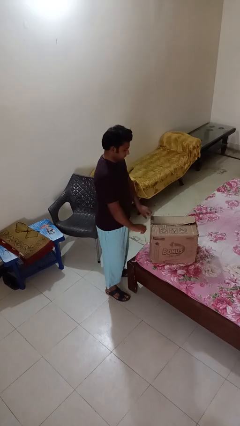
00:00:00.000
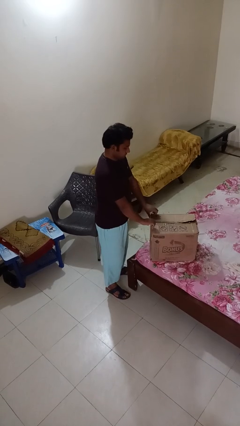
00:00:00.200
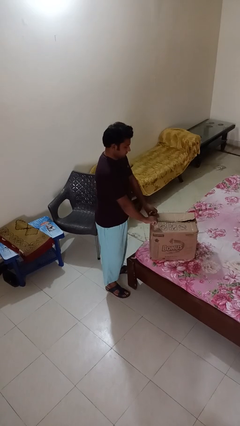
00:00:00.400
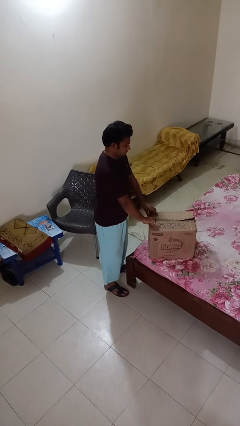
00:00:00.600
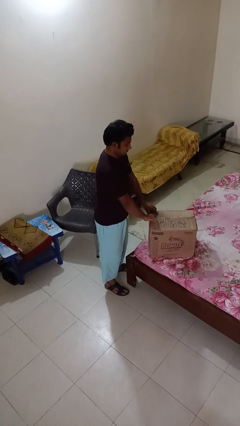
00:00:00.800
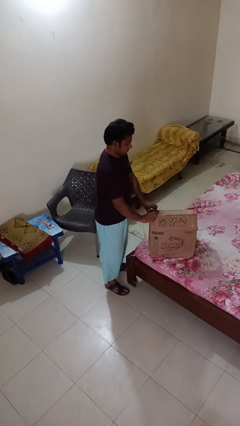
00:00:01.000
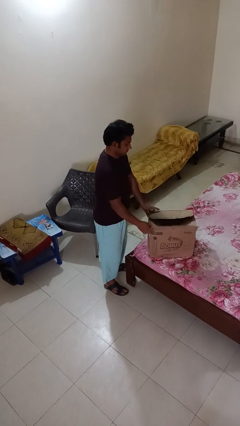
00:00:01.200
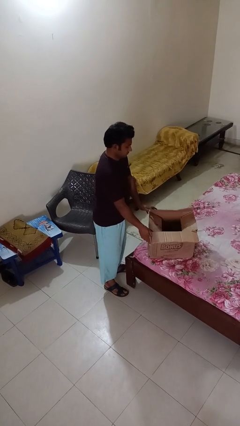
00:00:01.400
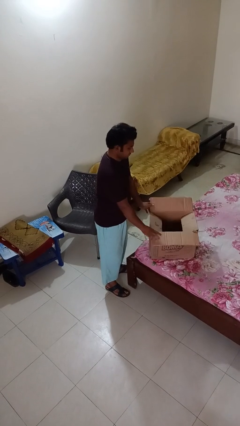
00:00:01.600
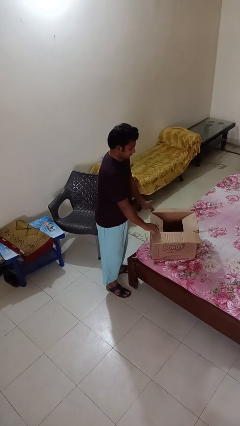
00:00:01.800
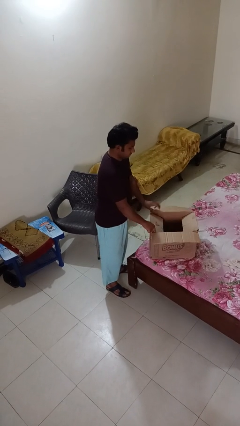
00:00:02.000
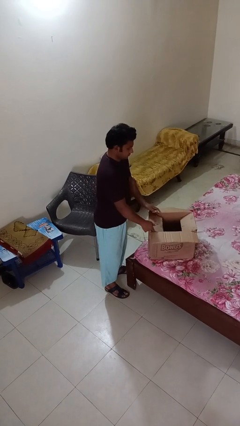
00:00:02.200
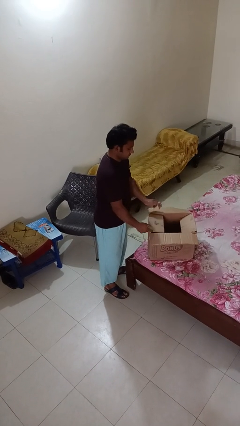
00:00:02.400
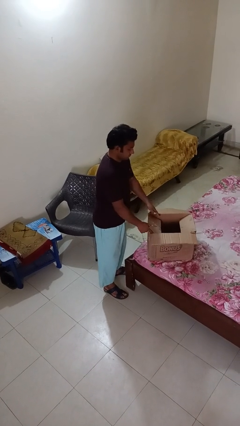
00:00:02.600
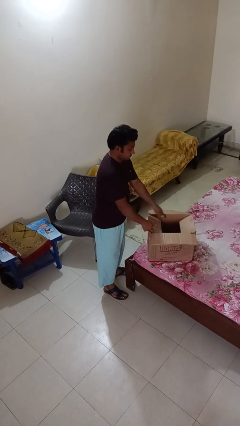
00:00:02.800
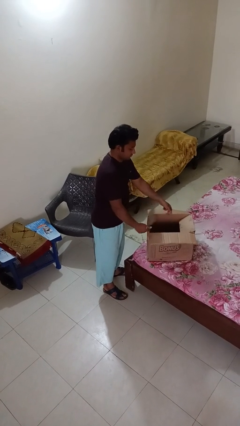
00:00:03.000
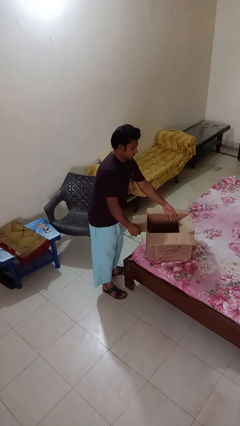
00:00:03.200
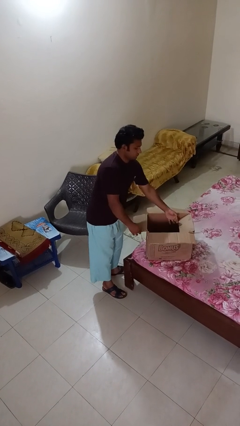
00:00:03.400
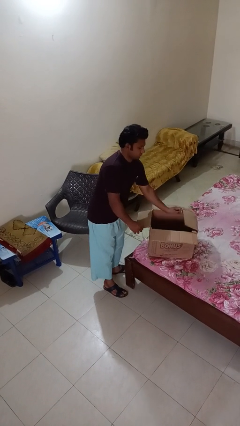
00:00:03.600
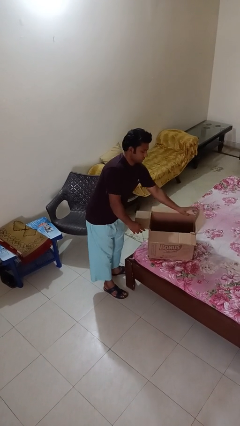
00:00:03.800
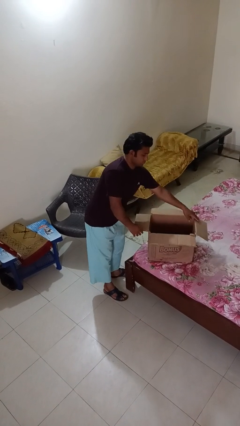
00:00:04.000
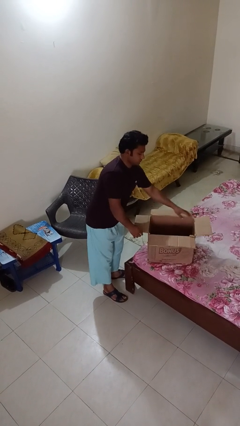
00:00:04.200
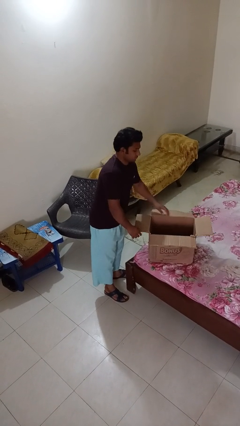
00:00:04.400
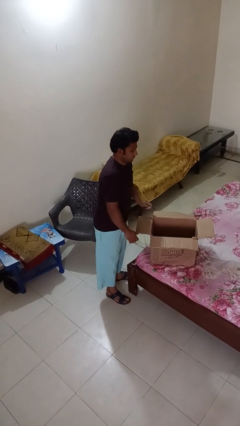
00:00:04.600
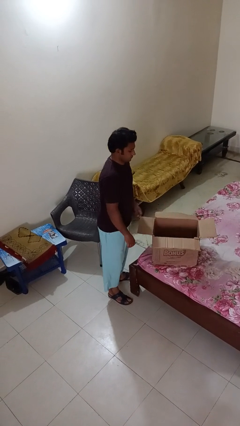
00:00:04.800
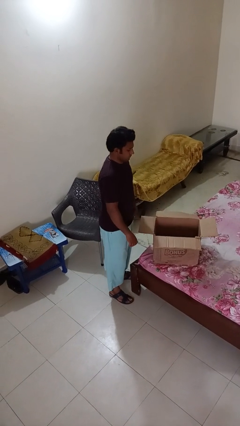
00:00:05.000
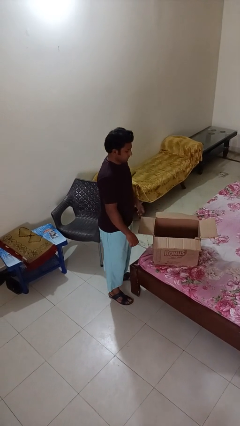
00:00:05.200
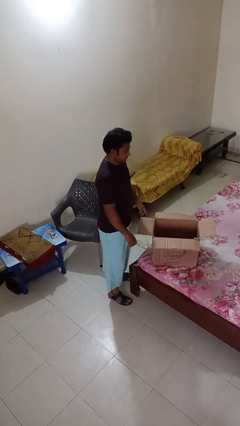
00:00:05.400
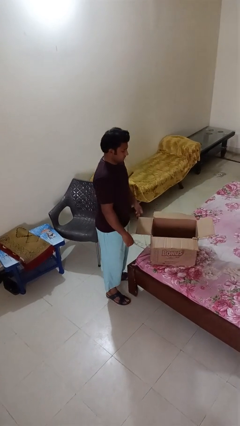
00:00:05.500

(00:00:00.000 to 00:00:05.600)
person opens box

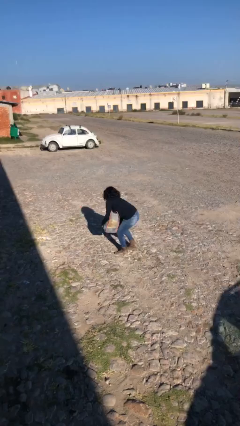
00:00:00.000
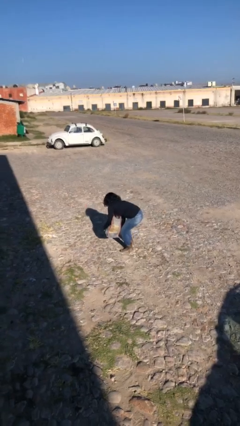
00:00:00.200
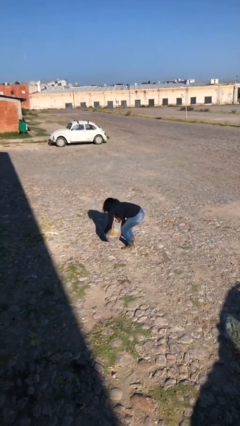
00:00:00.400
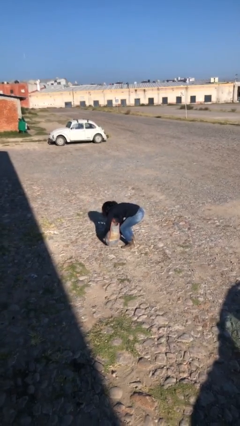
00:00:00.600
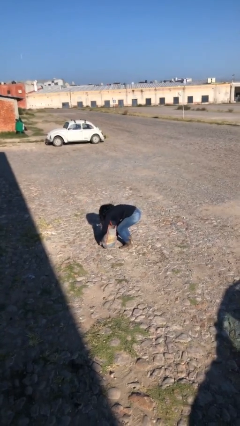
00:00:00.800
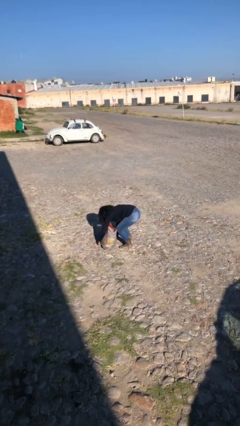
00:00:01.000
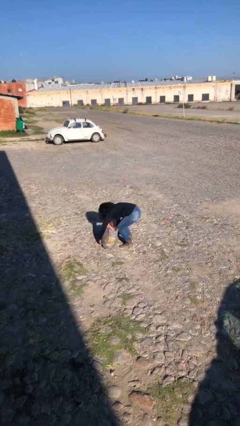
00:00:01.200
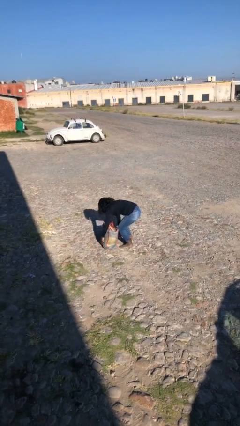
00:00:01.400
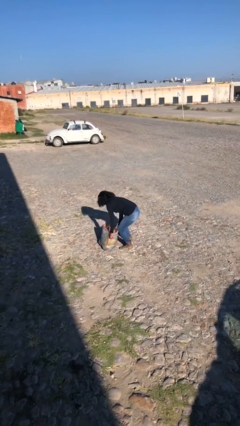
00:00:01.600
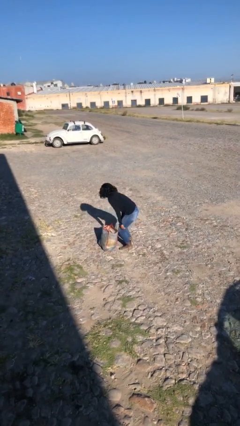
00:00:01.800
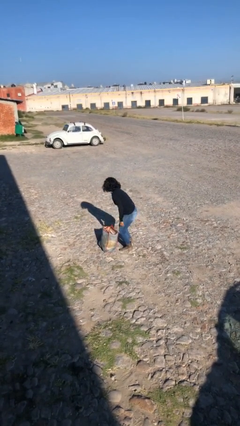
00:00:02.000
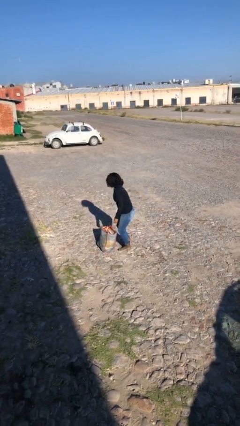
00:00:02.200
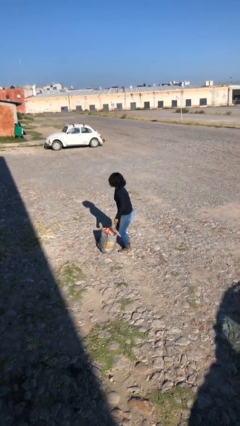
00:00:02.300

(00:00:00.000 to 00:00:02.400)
person puts down object on floor

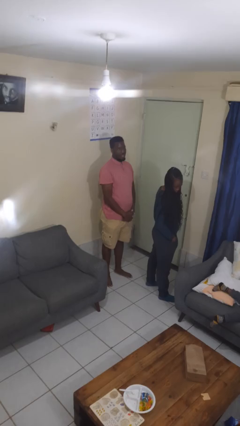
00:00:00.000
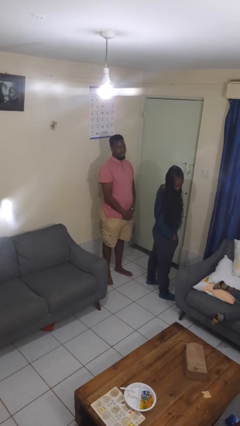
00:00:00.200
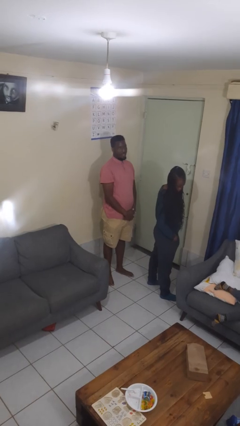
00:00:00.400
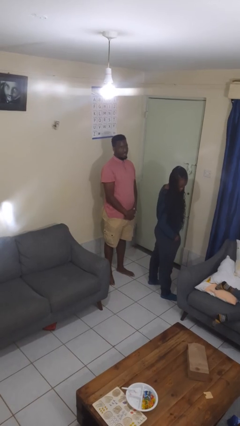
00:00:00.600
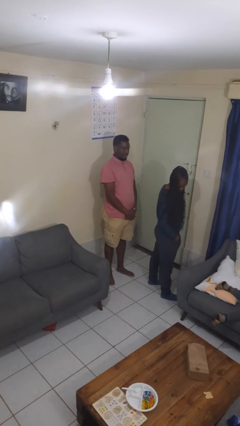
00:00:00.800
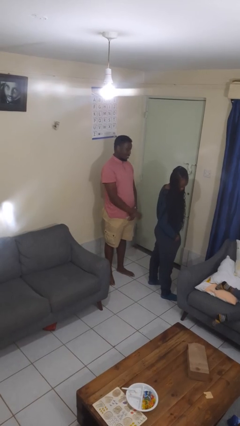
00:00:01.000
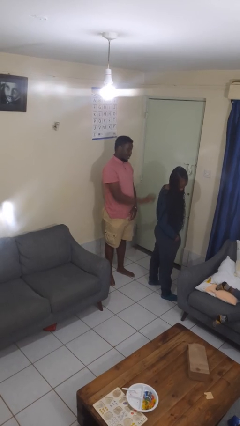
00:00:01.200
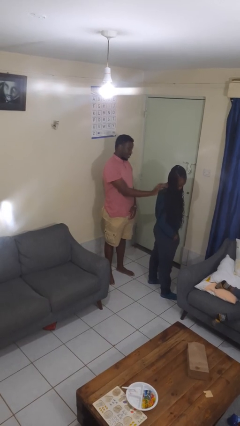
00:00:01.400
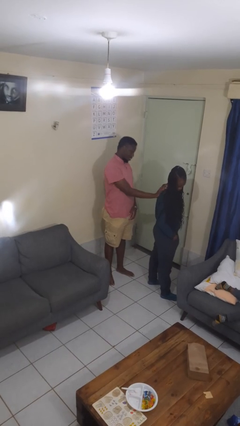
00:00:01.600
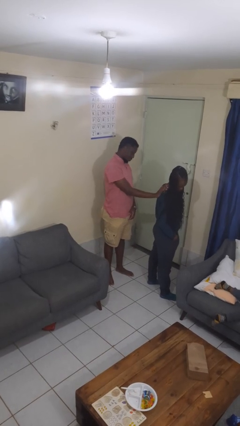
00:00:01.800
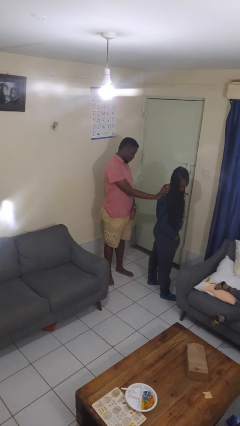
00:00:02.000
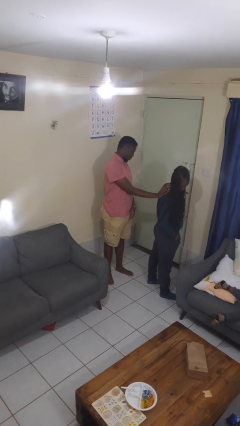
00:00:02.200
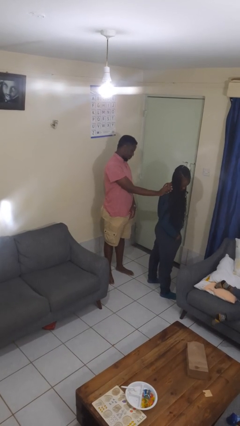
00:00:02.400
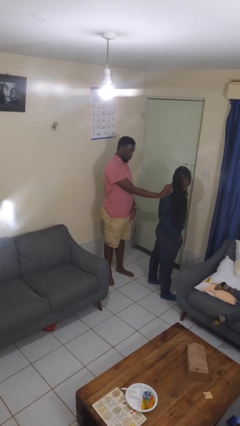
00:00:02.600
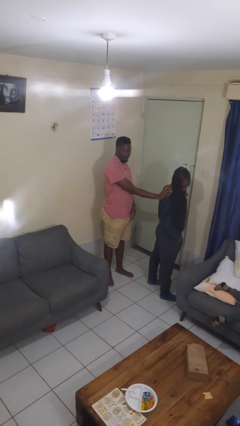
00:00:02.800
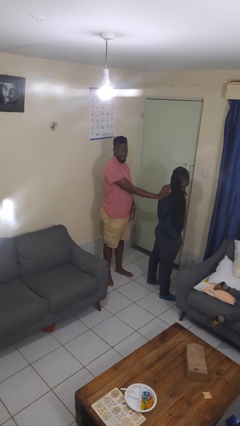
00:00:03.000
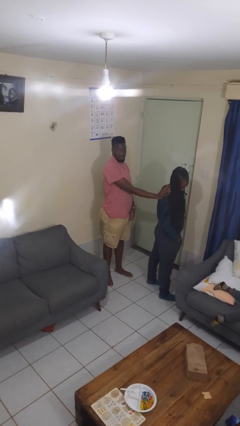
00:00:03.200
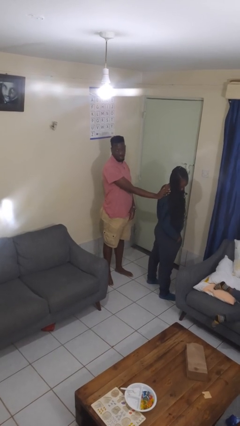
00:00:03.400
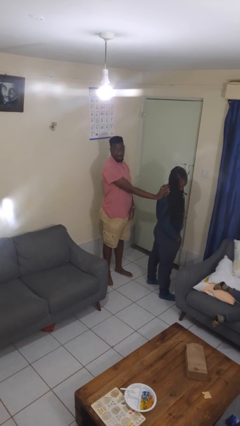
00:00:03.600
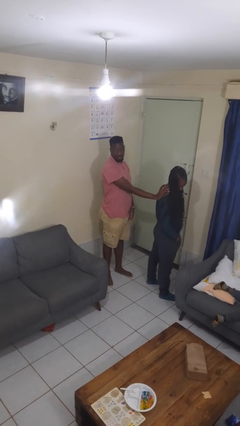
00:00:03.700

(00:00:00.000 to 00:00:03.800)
person touches back of person

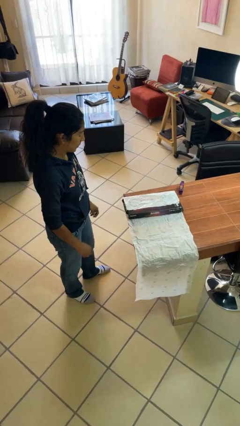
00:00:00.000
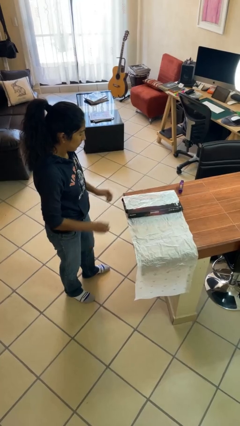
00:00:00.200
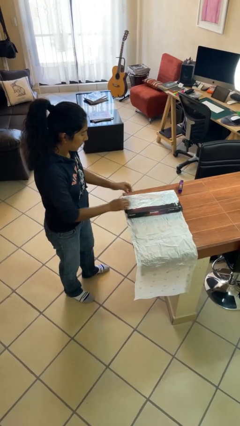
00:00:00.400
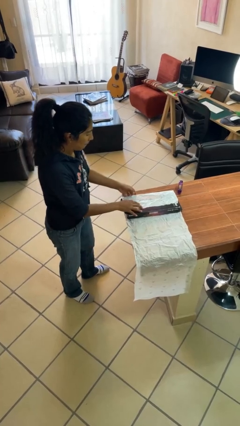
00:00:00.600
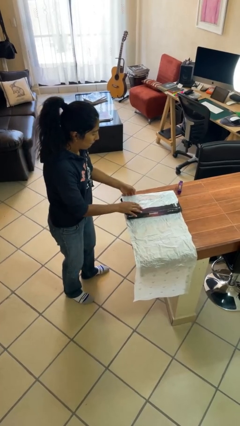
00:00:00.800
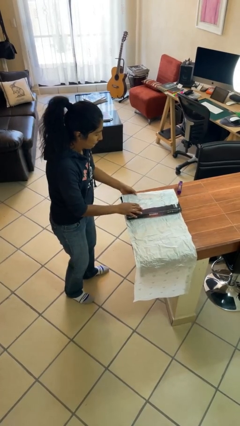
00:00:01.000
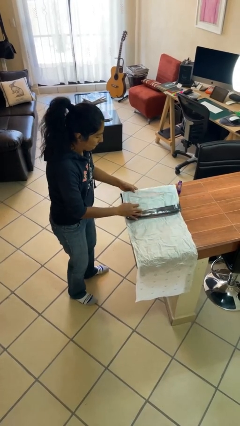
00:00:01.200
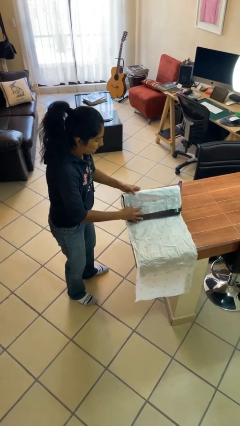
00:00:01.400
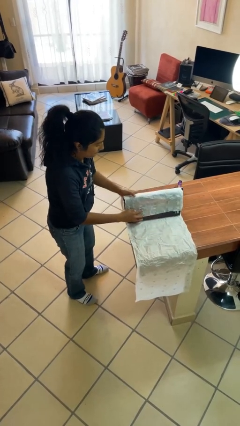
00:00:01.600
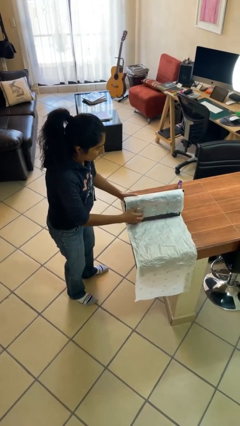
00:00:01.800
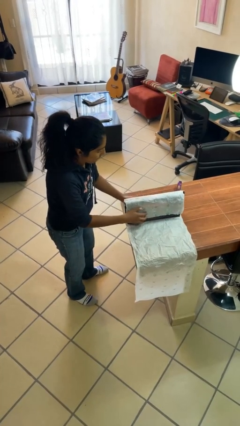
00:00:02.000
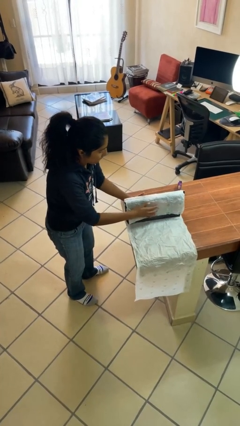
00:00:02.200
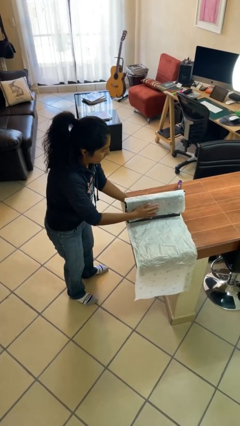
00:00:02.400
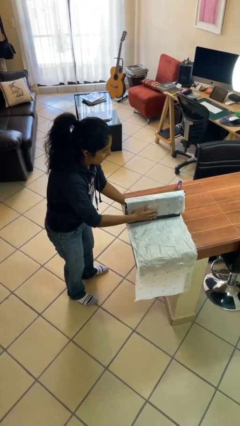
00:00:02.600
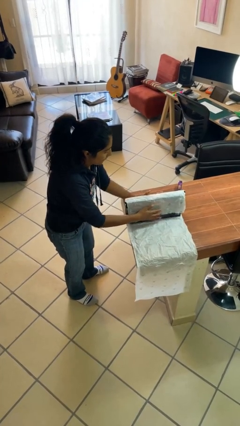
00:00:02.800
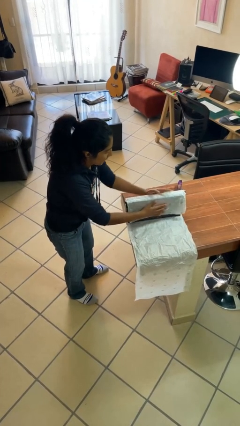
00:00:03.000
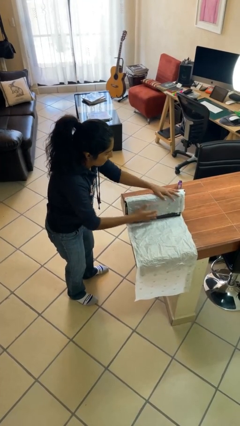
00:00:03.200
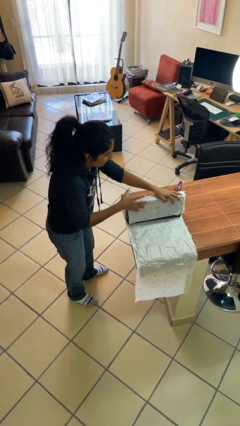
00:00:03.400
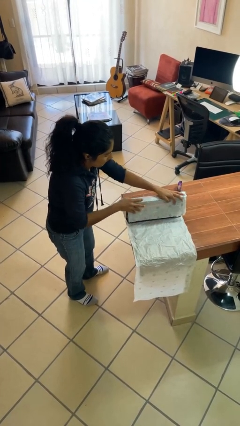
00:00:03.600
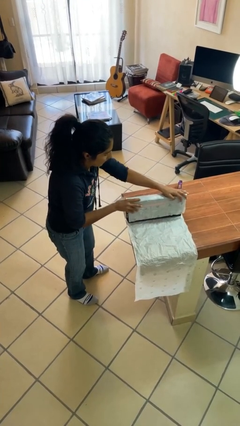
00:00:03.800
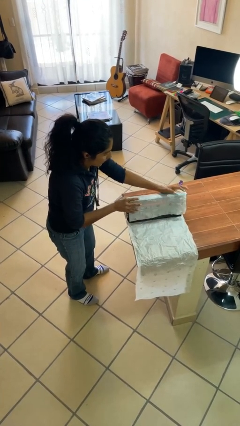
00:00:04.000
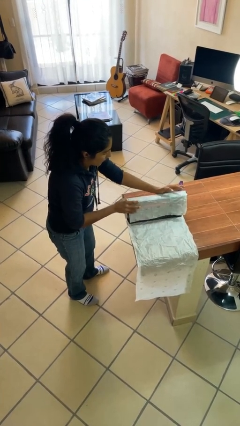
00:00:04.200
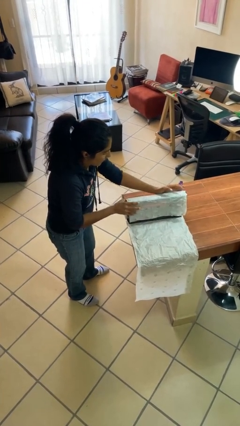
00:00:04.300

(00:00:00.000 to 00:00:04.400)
person wraps box

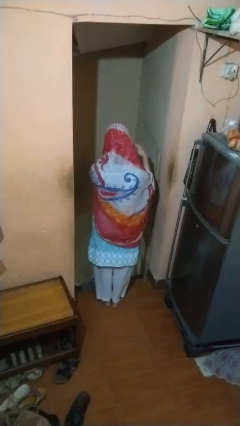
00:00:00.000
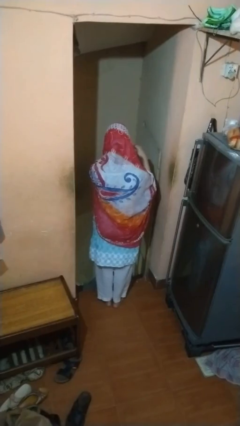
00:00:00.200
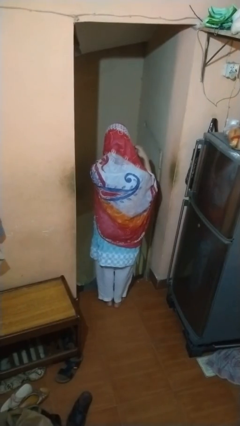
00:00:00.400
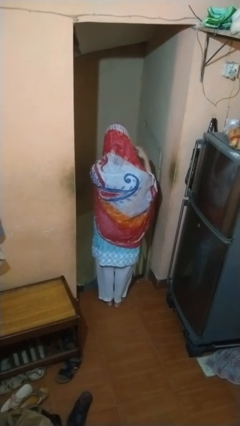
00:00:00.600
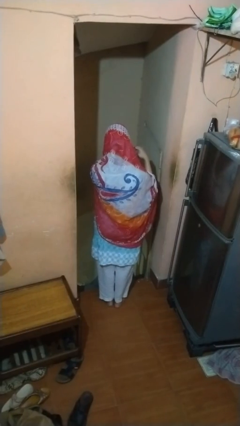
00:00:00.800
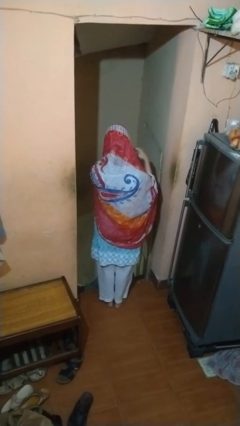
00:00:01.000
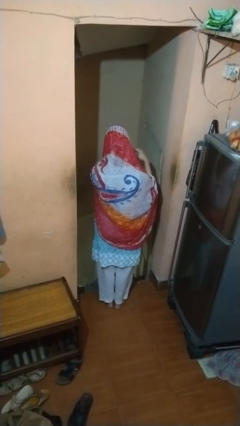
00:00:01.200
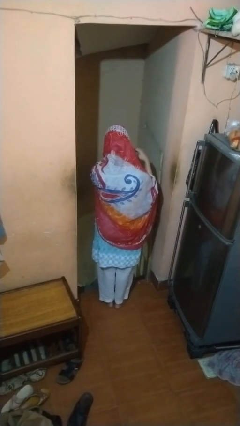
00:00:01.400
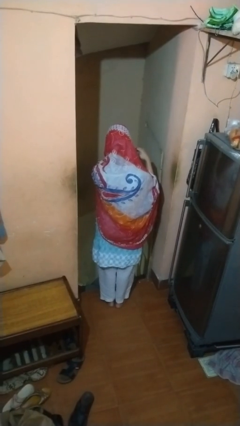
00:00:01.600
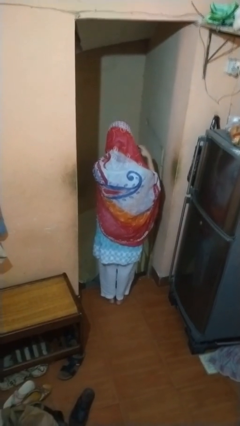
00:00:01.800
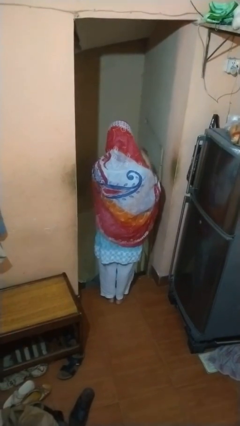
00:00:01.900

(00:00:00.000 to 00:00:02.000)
person gestures heart
